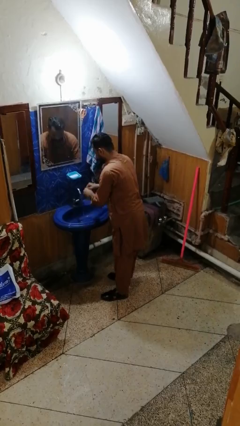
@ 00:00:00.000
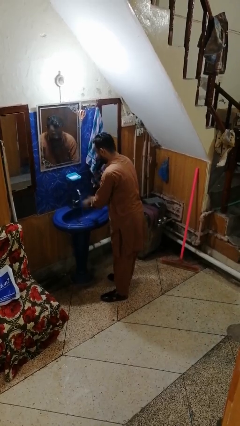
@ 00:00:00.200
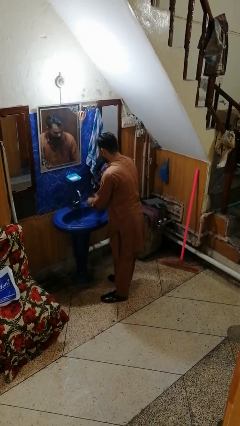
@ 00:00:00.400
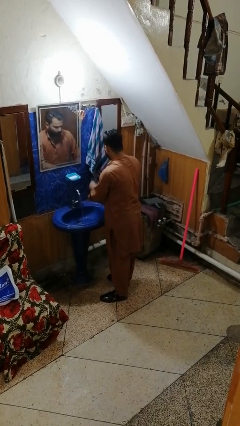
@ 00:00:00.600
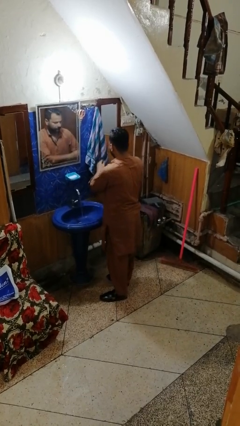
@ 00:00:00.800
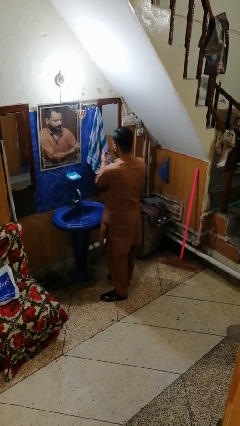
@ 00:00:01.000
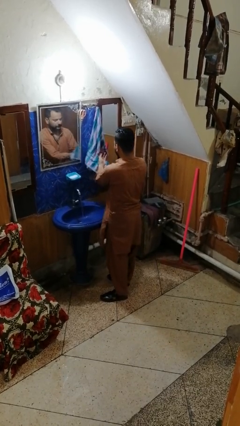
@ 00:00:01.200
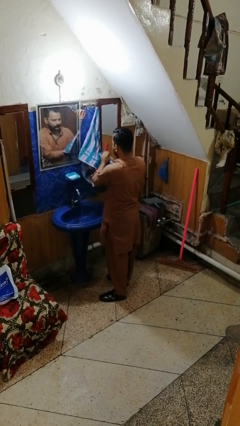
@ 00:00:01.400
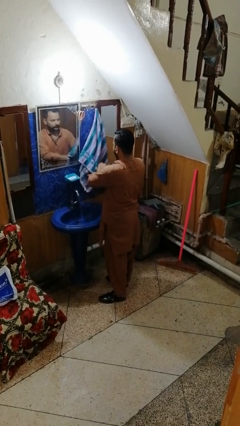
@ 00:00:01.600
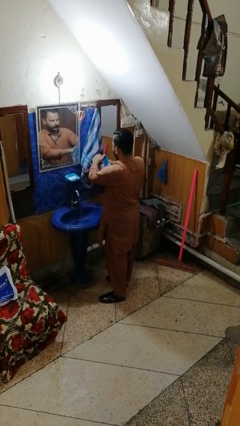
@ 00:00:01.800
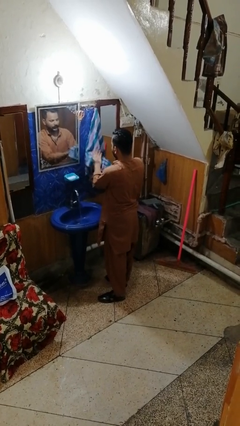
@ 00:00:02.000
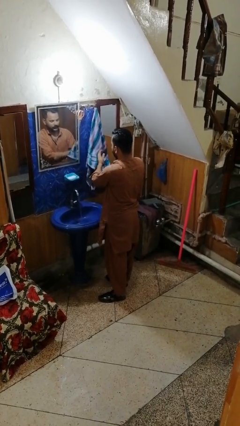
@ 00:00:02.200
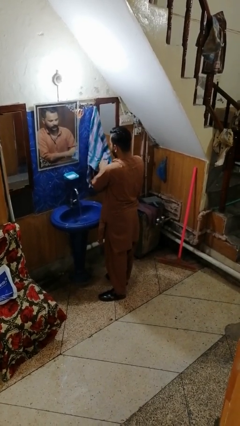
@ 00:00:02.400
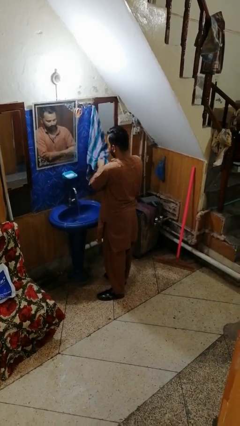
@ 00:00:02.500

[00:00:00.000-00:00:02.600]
person dries hands with towel

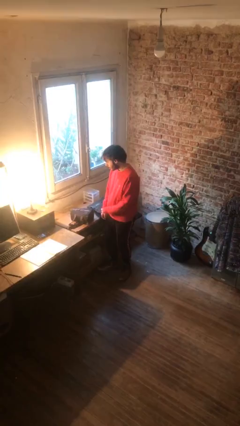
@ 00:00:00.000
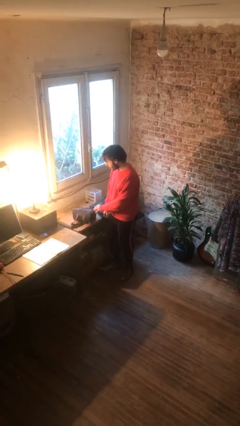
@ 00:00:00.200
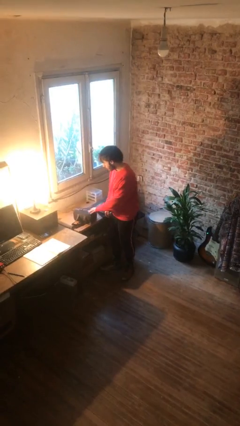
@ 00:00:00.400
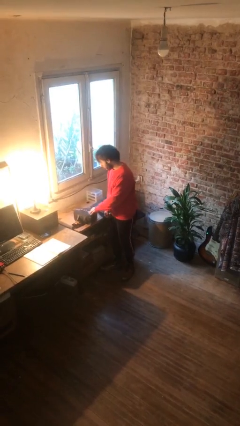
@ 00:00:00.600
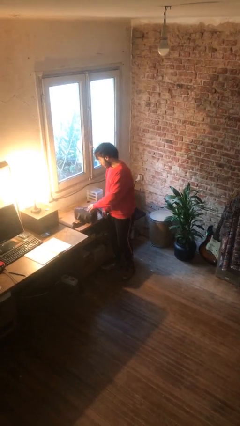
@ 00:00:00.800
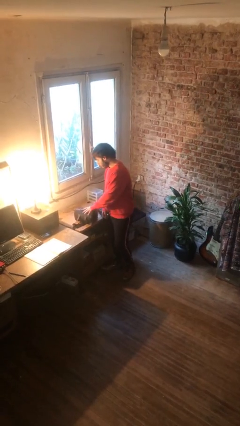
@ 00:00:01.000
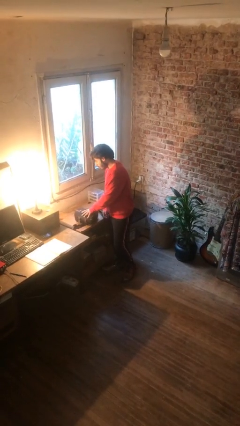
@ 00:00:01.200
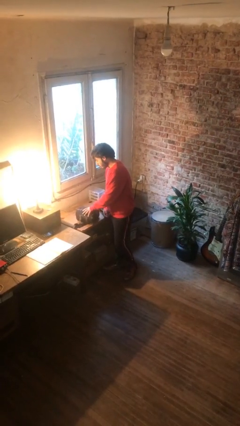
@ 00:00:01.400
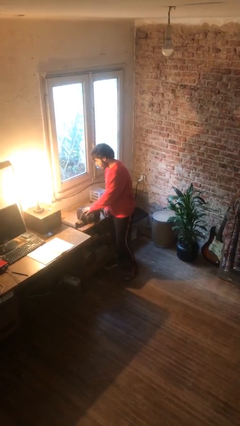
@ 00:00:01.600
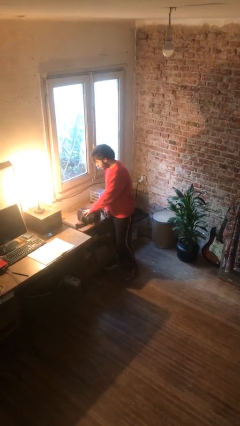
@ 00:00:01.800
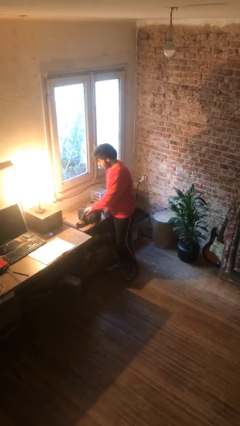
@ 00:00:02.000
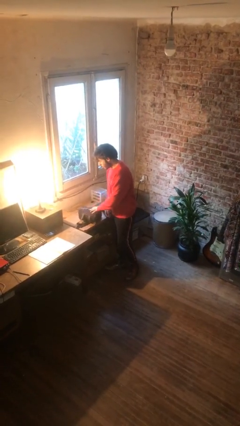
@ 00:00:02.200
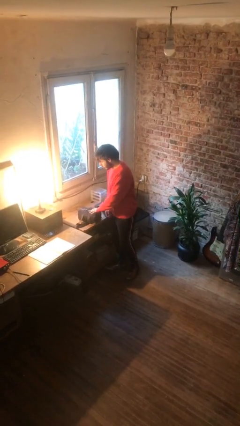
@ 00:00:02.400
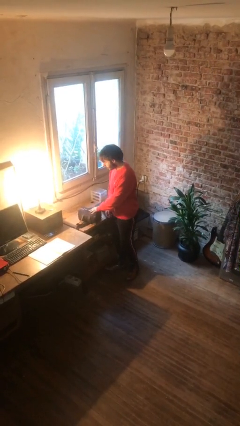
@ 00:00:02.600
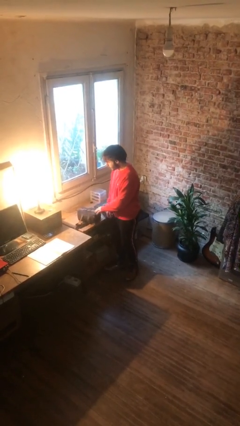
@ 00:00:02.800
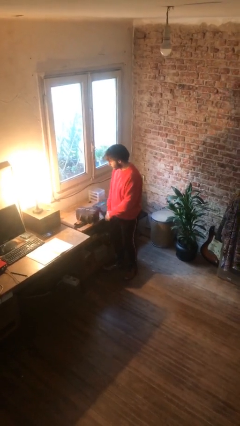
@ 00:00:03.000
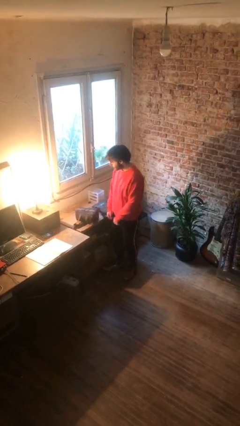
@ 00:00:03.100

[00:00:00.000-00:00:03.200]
person taps object with finger

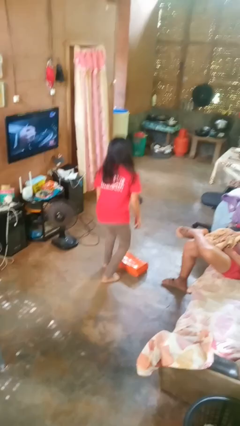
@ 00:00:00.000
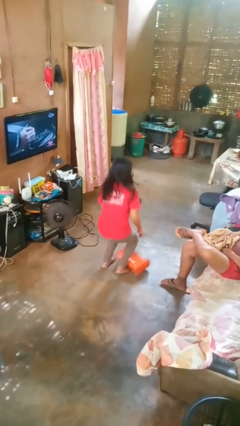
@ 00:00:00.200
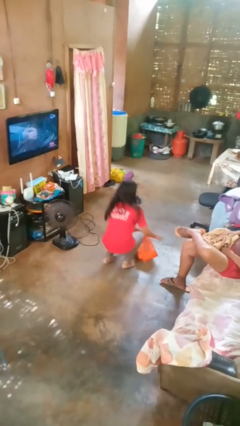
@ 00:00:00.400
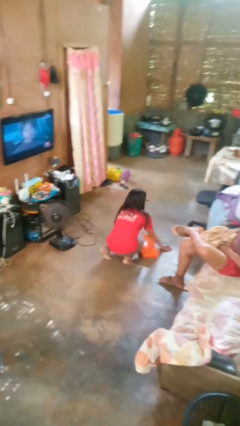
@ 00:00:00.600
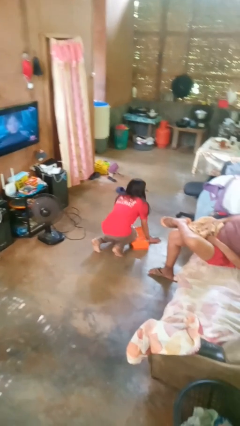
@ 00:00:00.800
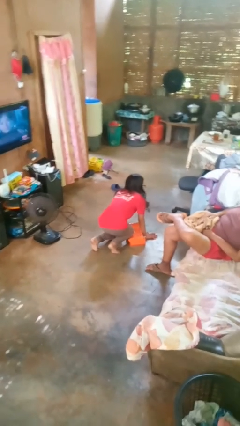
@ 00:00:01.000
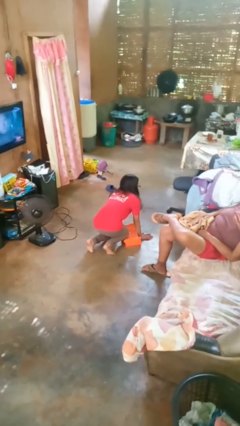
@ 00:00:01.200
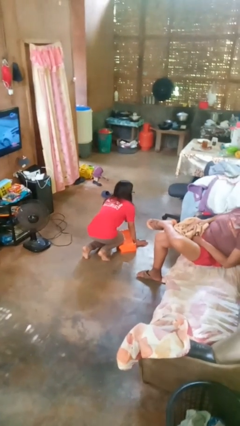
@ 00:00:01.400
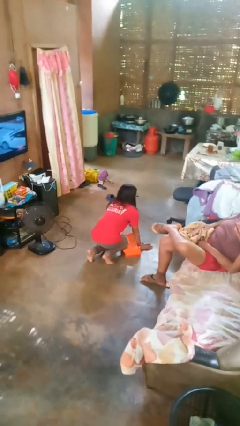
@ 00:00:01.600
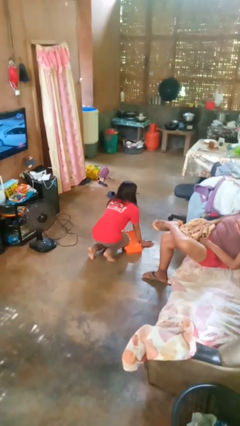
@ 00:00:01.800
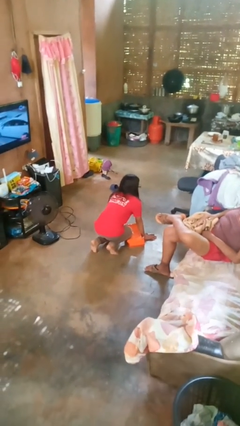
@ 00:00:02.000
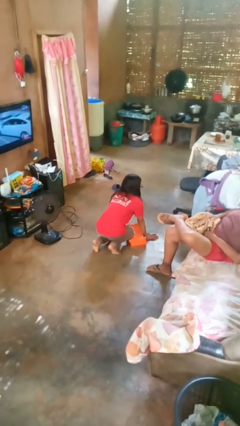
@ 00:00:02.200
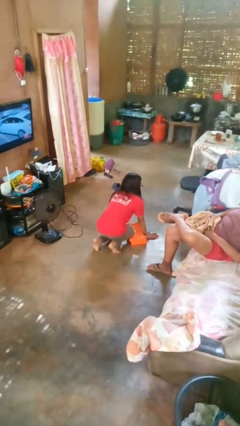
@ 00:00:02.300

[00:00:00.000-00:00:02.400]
person trips on object on floor

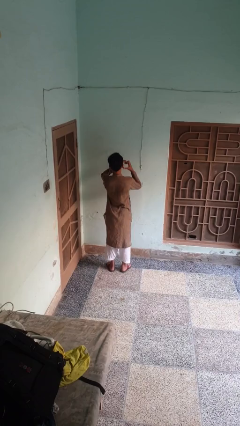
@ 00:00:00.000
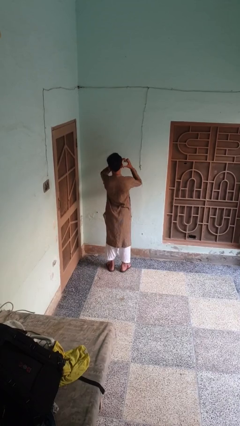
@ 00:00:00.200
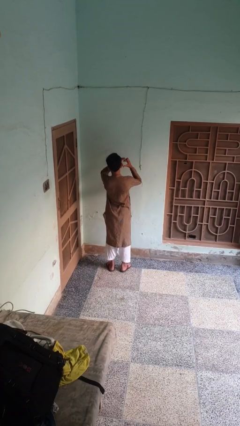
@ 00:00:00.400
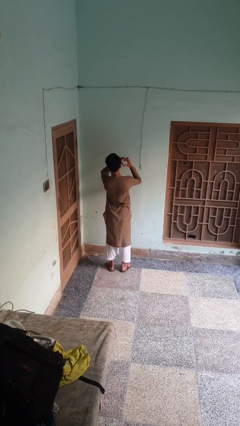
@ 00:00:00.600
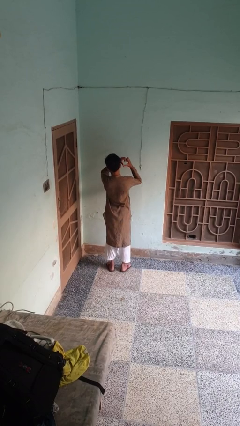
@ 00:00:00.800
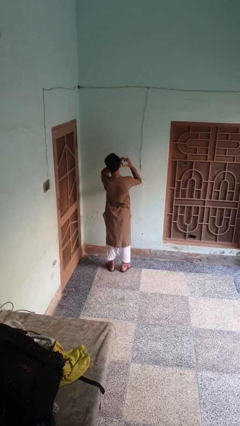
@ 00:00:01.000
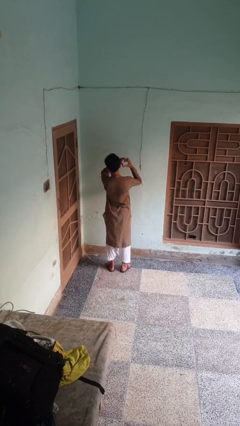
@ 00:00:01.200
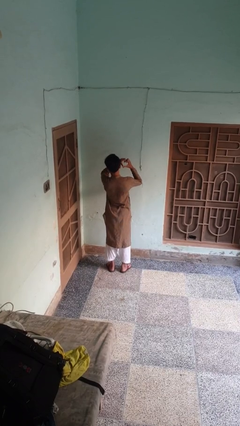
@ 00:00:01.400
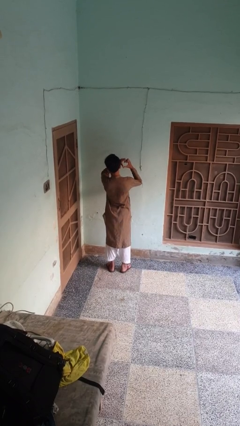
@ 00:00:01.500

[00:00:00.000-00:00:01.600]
person gestures heart
